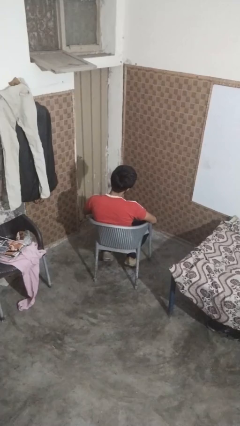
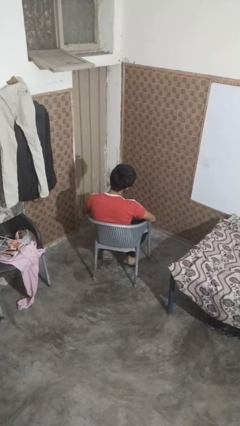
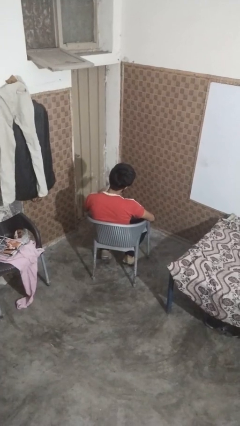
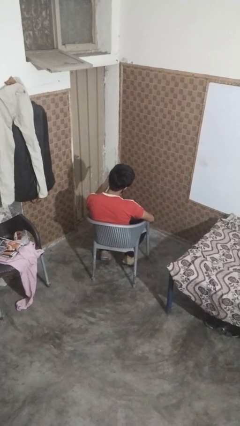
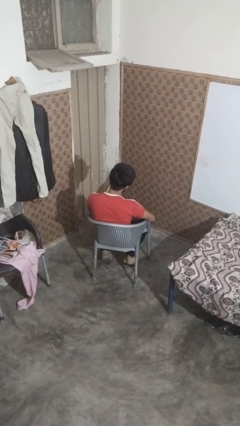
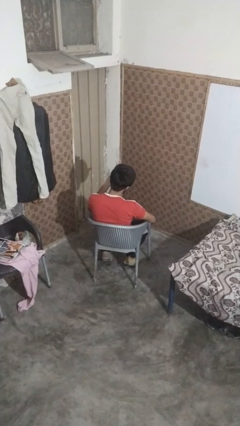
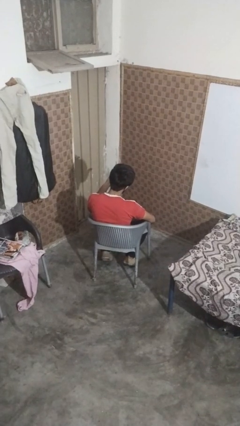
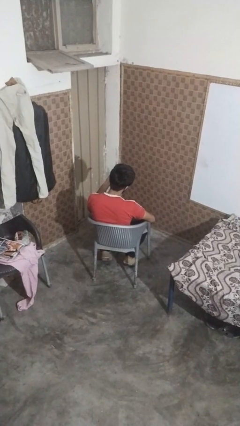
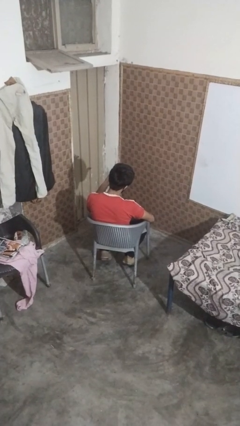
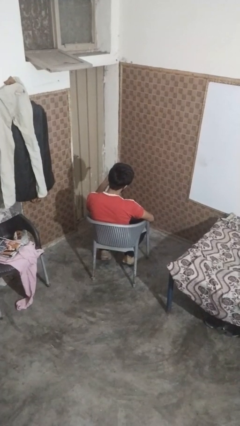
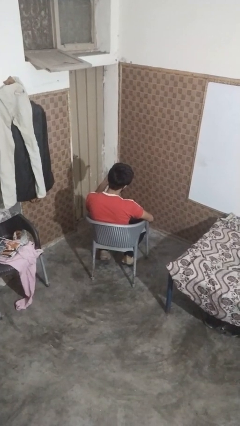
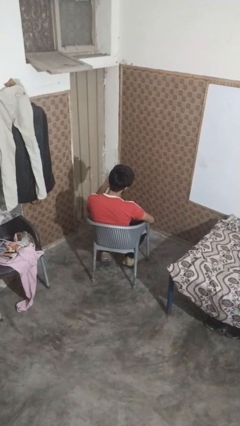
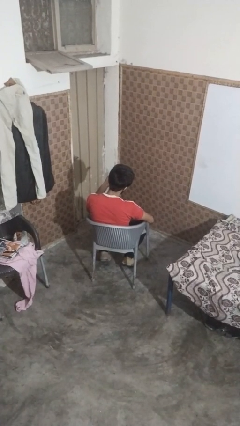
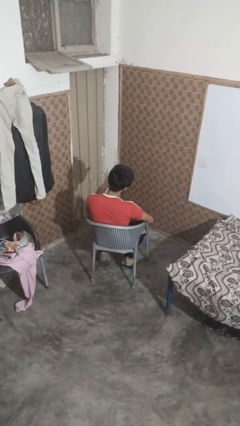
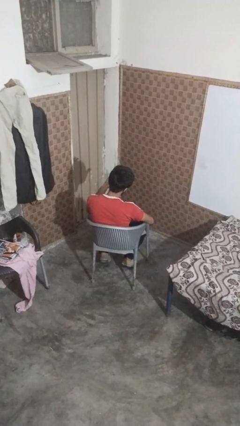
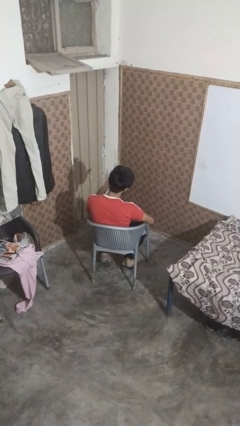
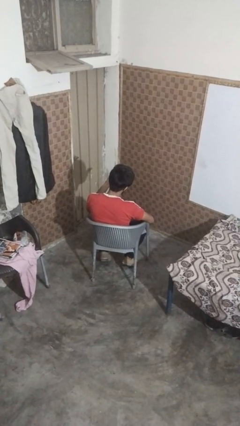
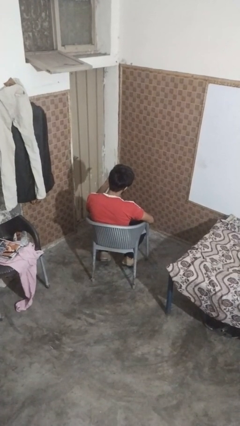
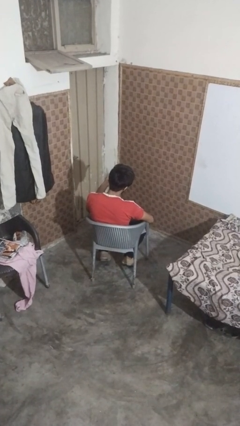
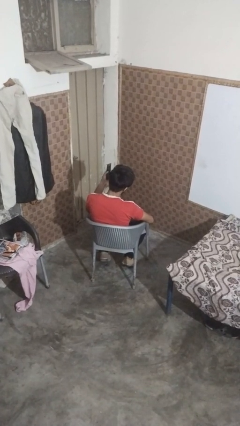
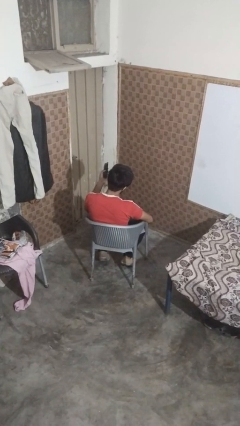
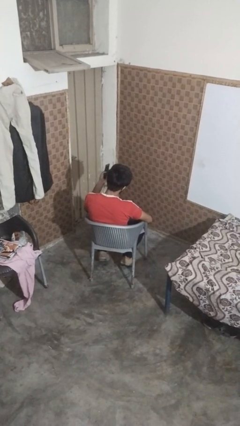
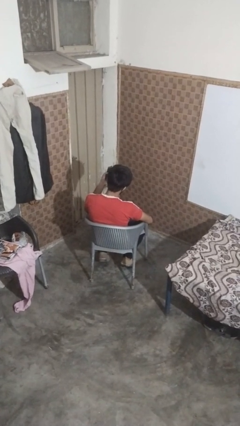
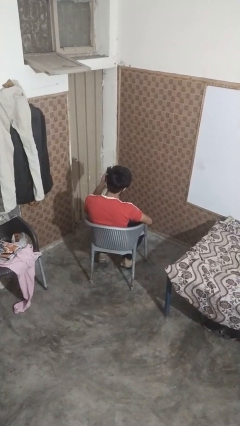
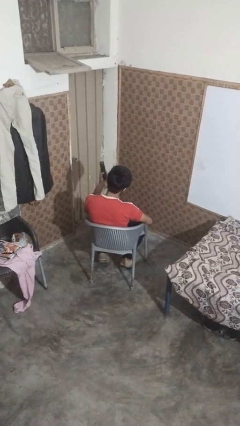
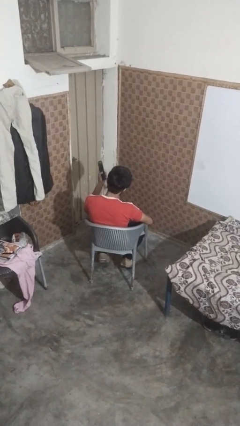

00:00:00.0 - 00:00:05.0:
person uses television remote

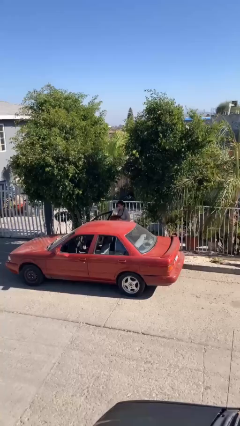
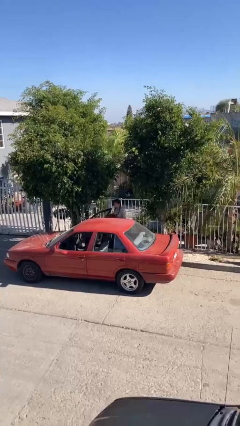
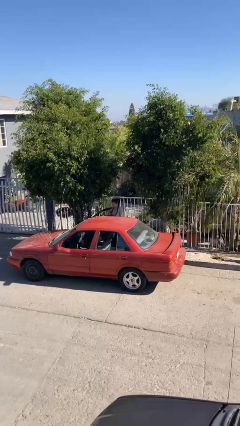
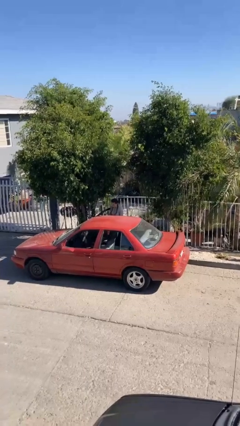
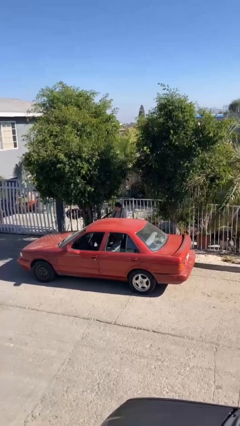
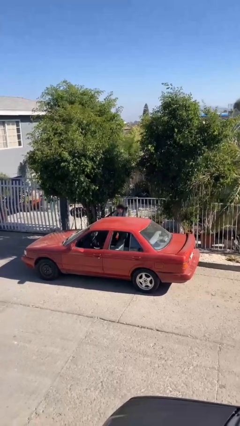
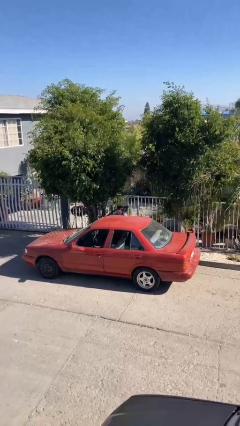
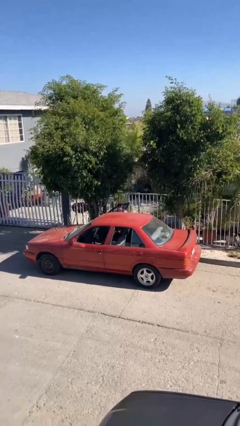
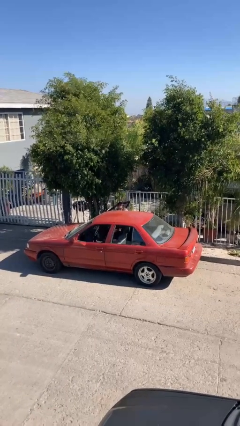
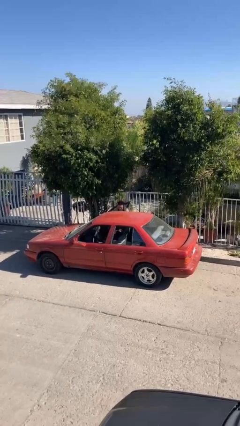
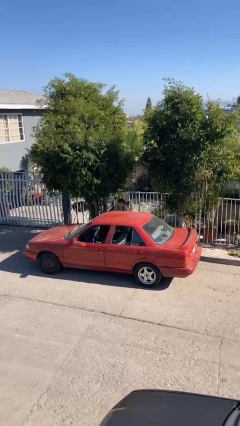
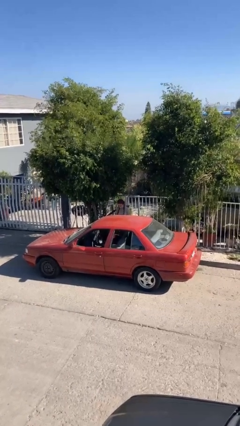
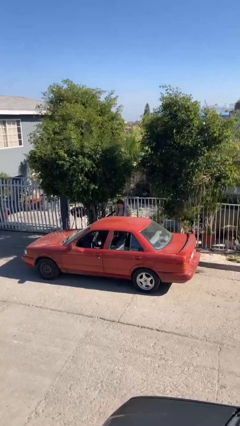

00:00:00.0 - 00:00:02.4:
person loads car

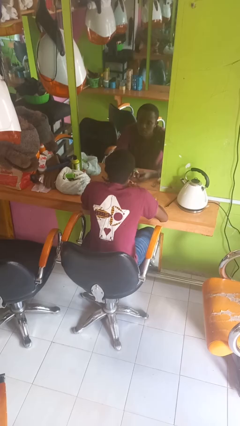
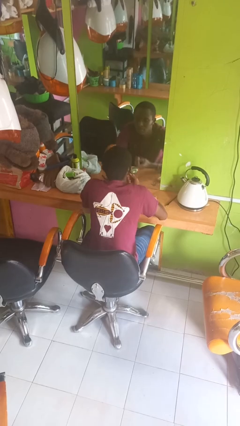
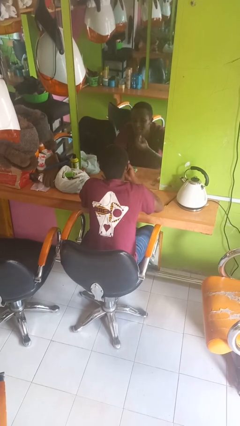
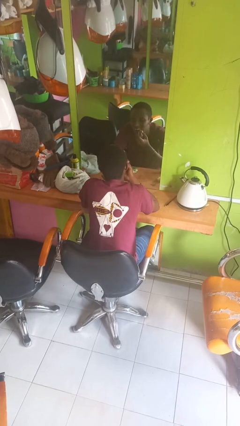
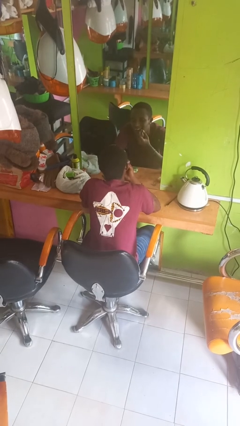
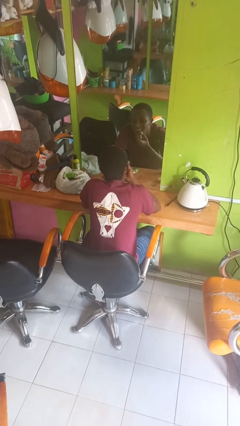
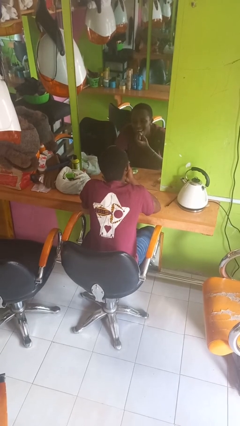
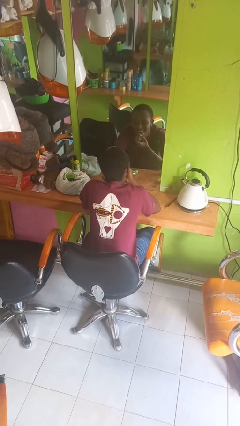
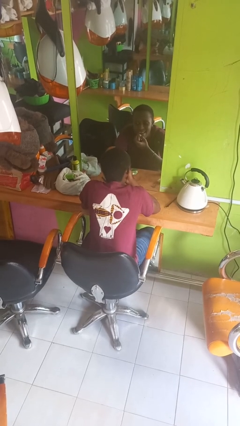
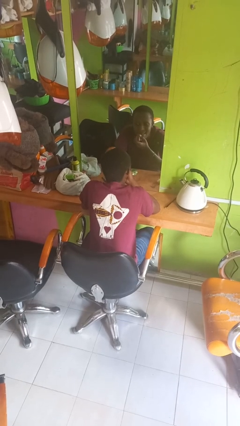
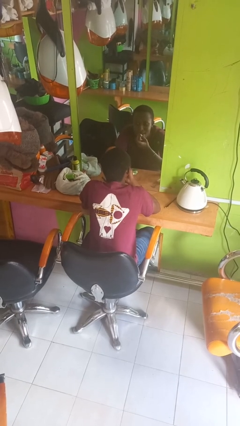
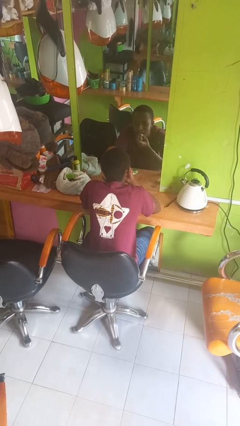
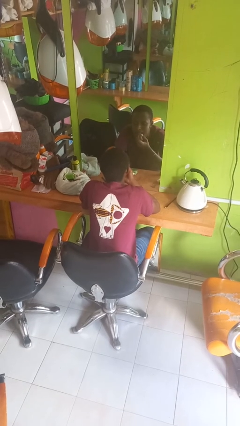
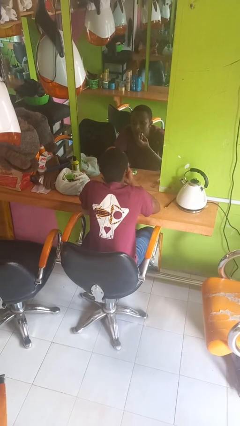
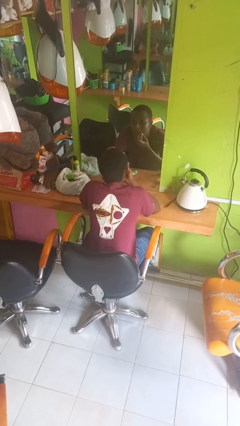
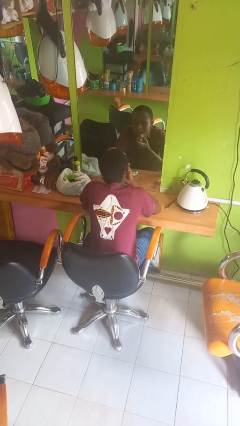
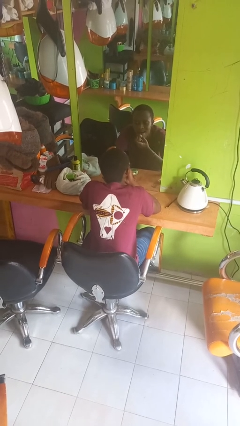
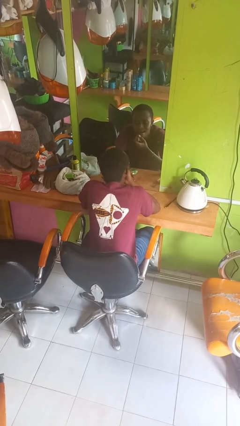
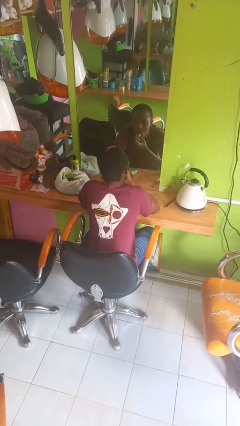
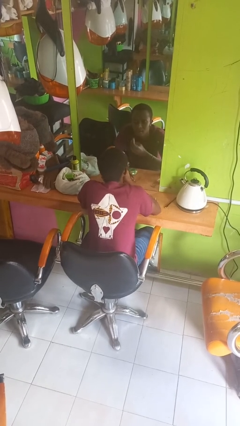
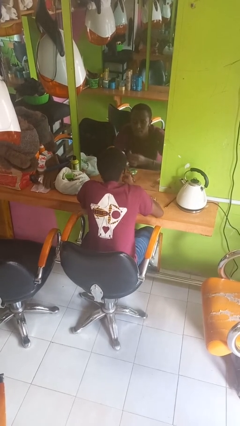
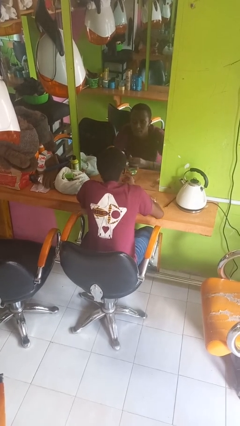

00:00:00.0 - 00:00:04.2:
person applies lip makeup

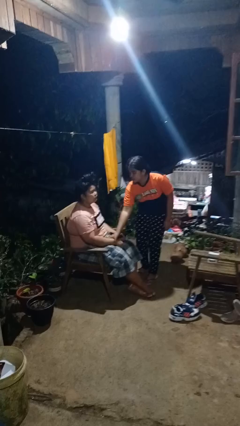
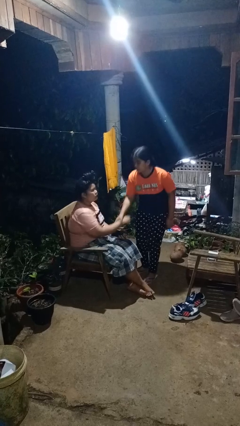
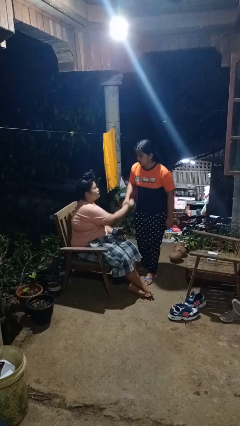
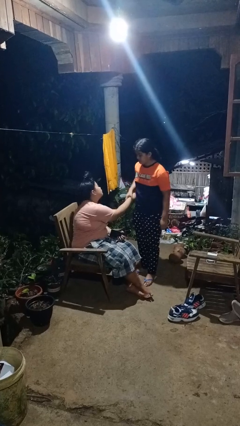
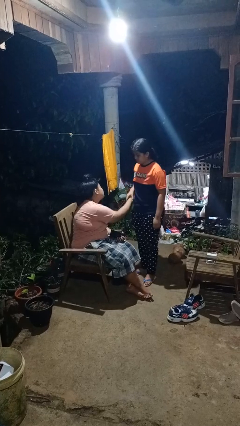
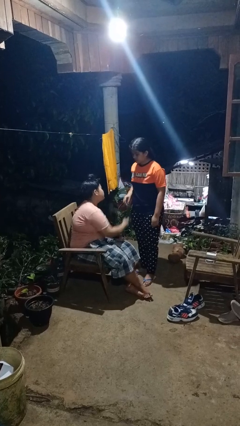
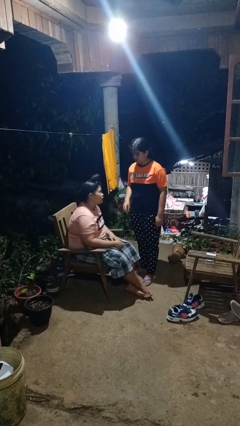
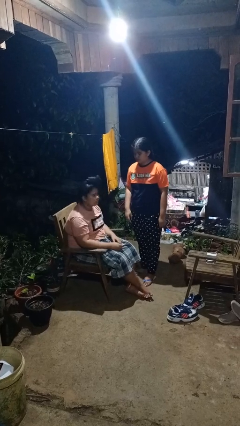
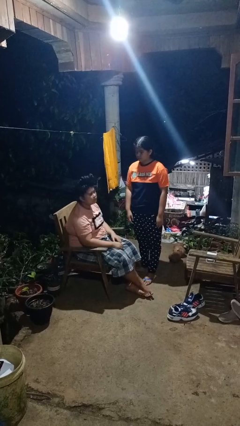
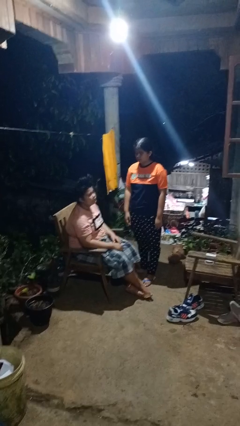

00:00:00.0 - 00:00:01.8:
person grabs person by forearm

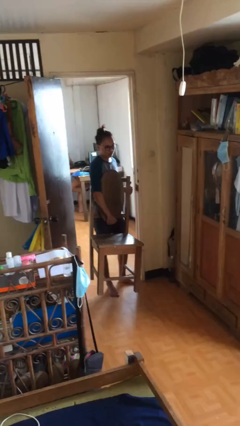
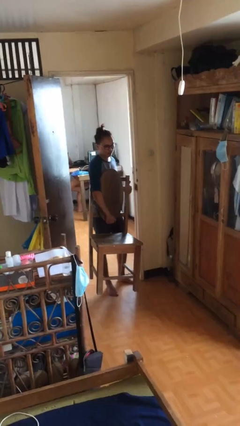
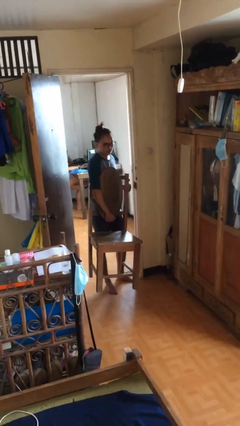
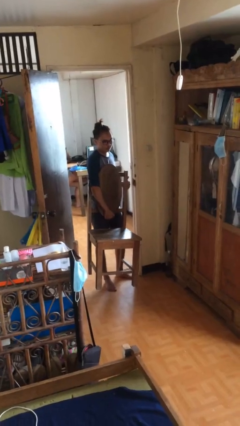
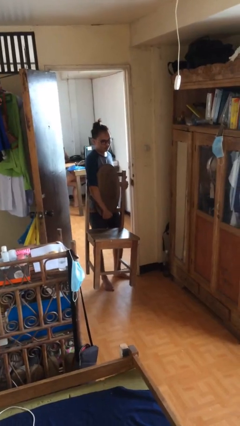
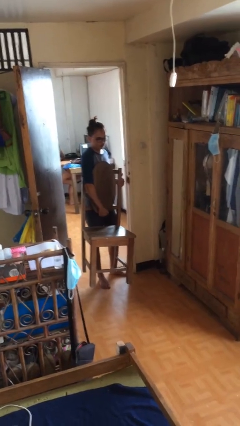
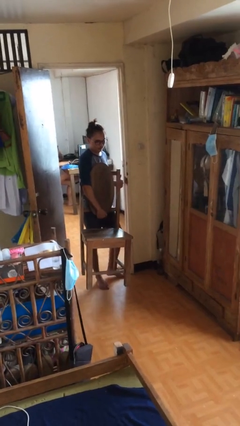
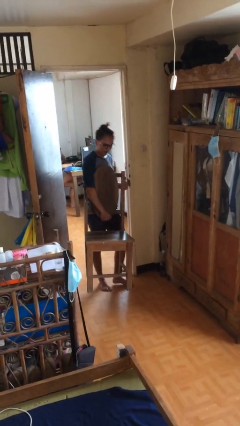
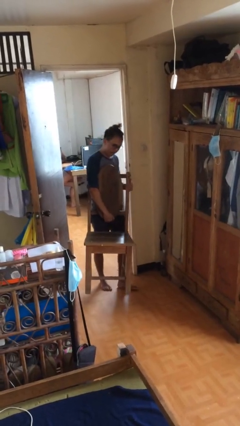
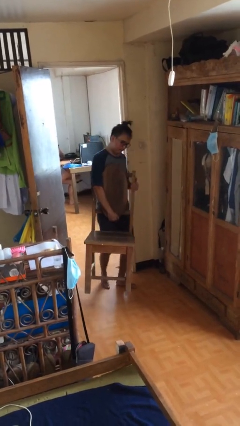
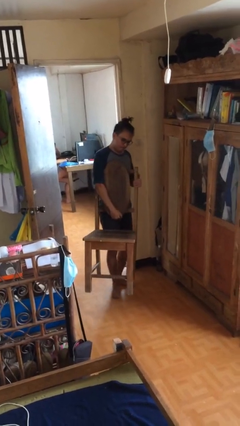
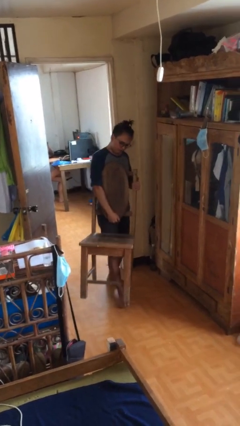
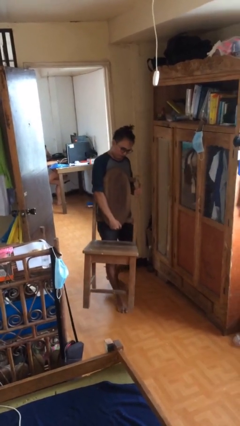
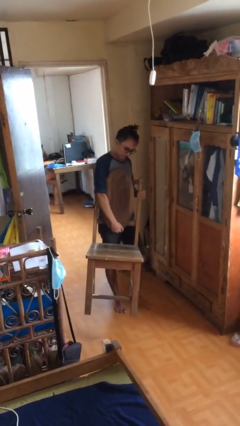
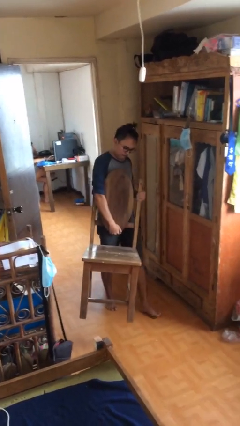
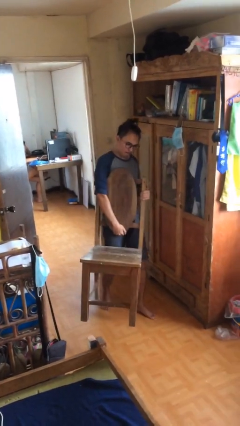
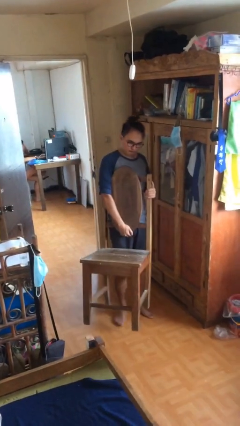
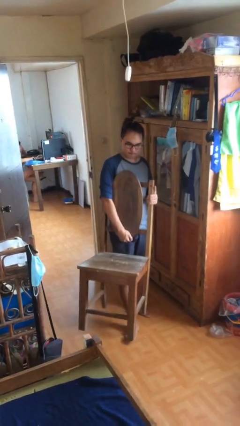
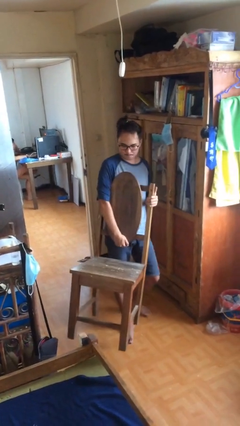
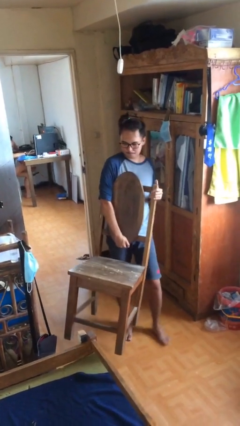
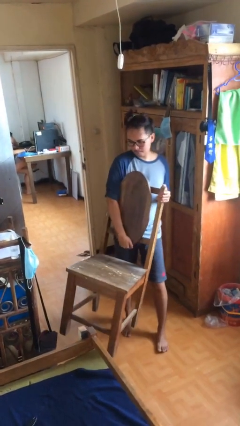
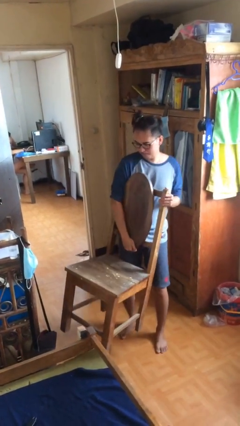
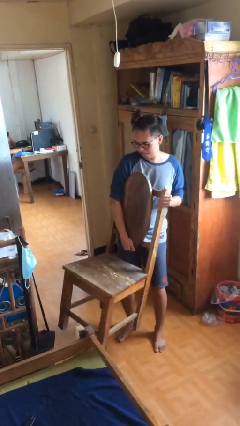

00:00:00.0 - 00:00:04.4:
person carries heavy object
